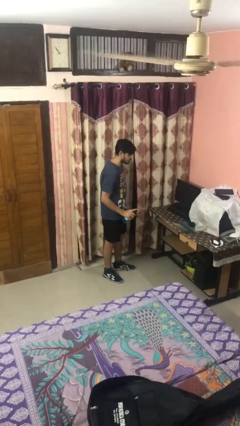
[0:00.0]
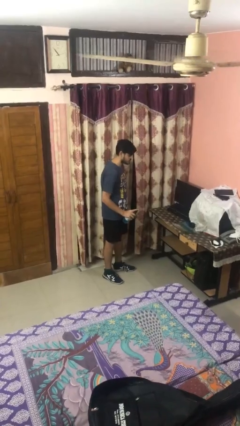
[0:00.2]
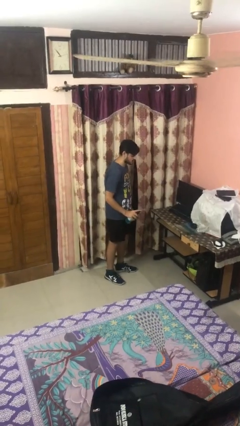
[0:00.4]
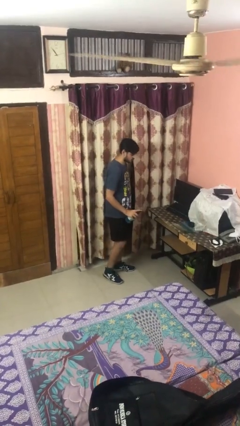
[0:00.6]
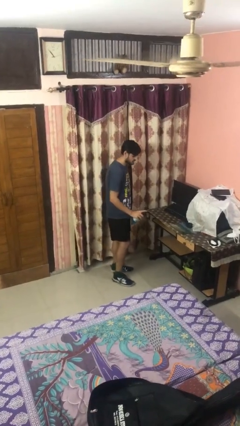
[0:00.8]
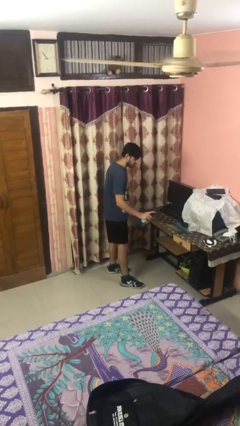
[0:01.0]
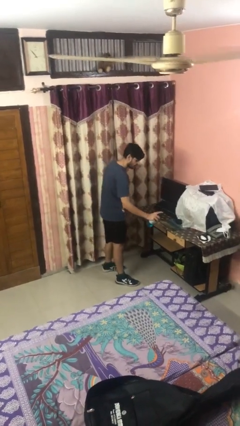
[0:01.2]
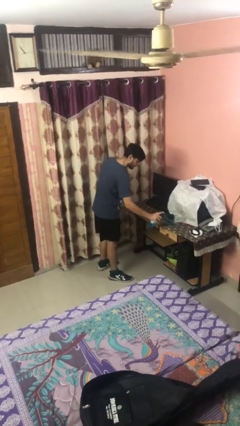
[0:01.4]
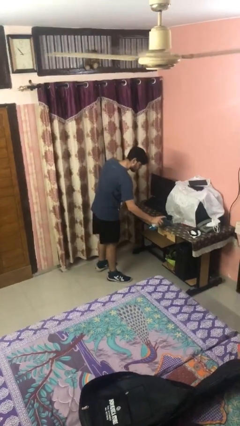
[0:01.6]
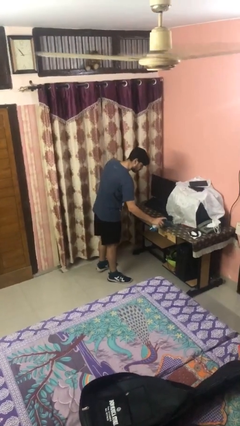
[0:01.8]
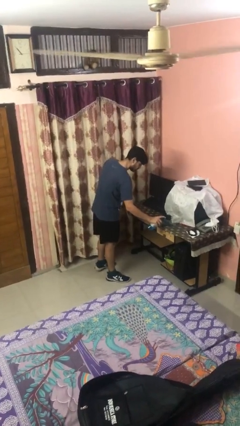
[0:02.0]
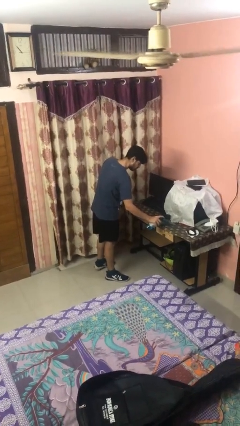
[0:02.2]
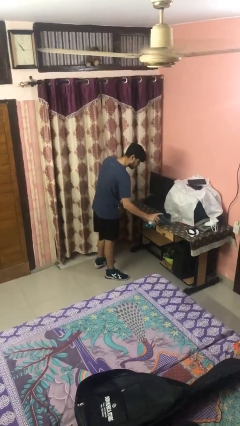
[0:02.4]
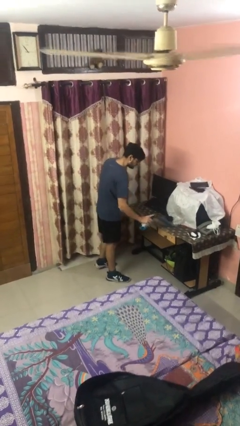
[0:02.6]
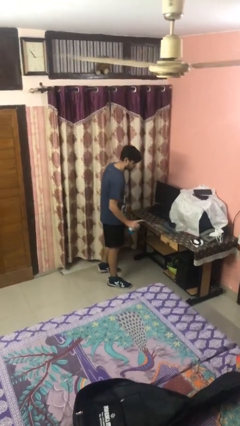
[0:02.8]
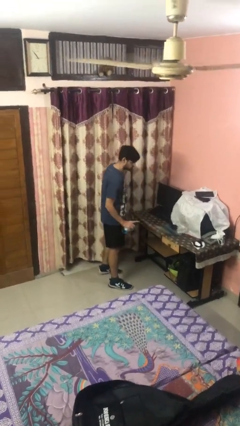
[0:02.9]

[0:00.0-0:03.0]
person sprays from bottle

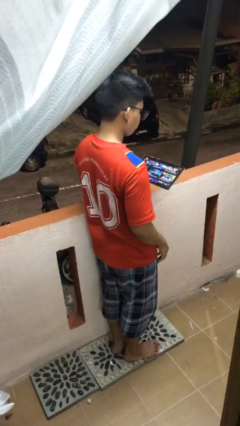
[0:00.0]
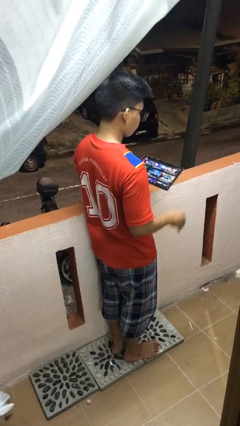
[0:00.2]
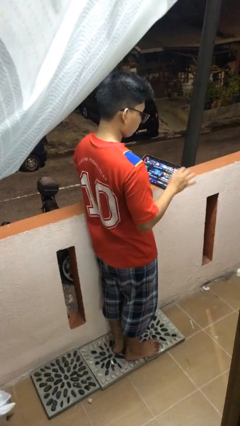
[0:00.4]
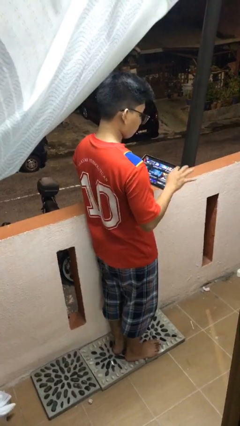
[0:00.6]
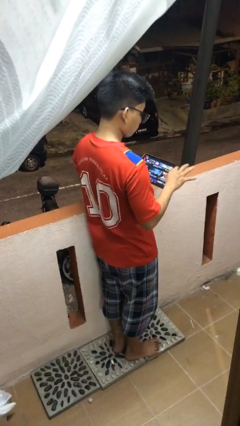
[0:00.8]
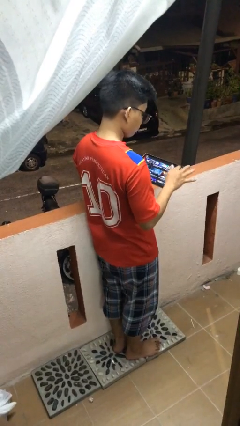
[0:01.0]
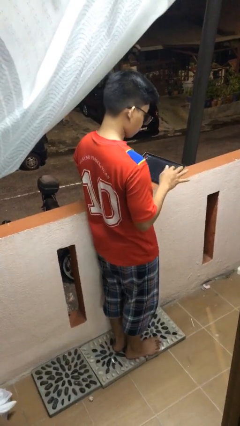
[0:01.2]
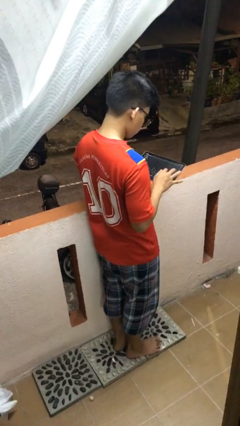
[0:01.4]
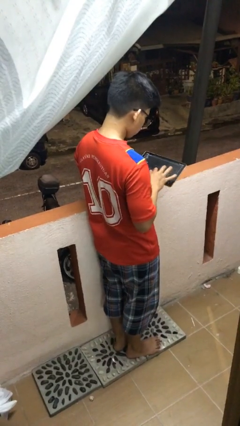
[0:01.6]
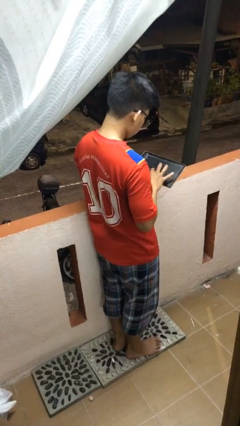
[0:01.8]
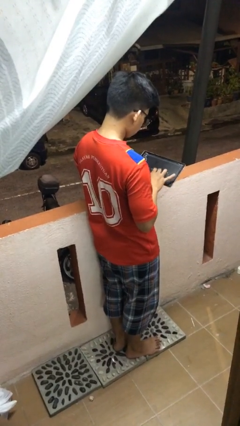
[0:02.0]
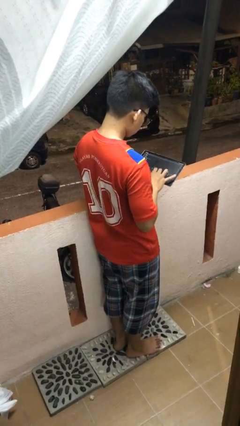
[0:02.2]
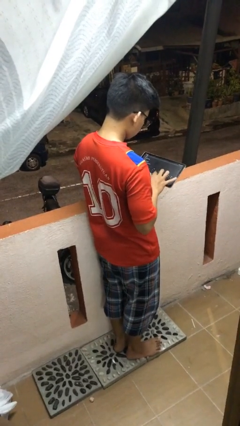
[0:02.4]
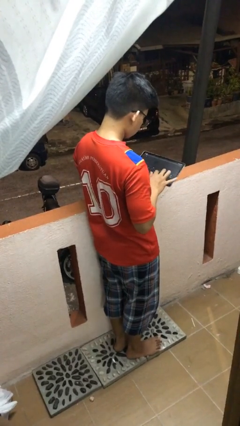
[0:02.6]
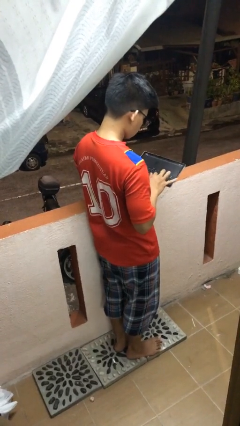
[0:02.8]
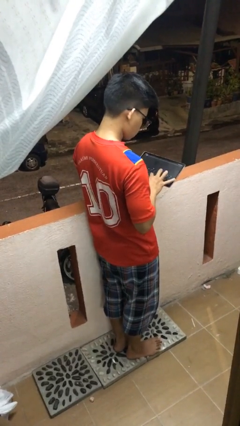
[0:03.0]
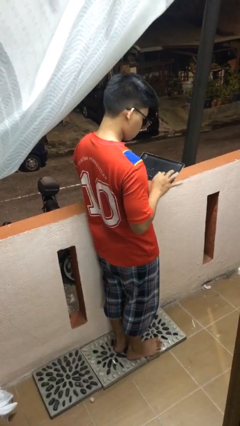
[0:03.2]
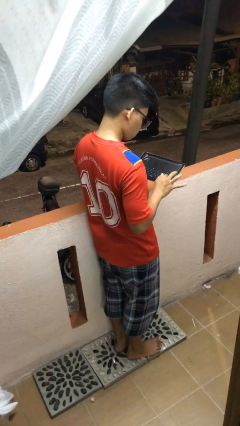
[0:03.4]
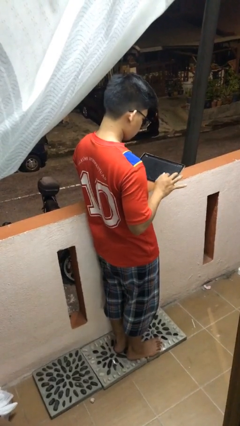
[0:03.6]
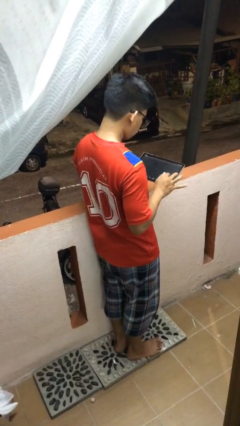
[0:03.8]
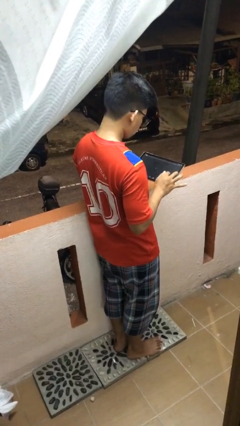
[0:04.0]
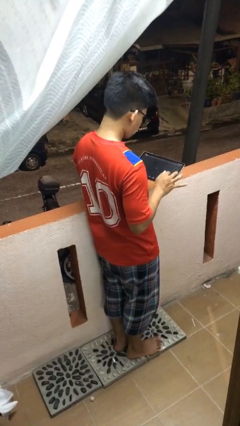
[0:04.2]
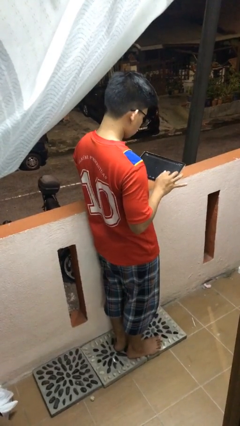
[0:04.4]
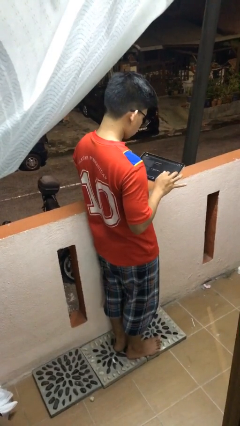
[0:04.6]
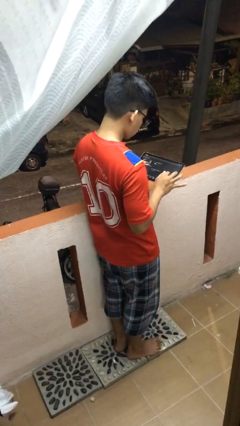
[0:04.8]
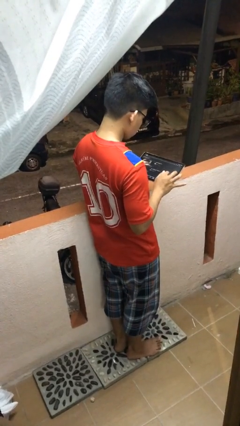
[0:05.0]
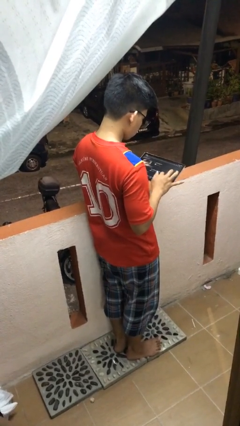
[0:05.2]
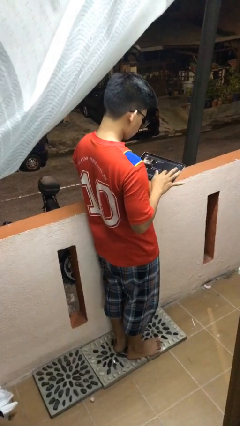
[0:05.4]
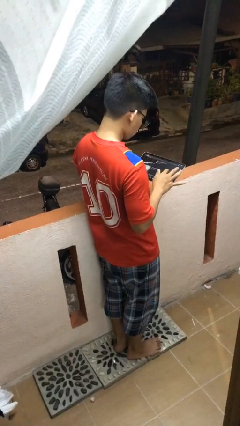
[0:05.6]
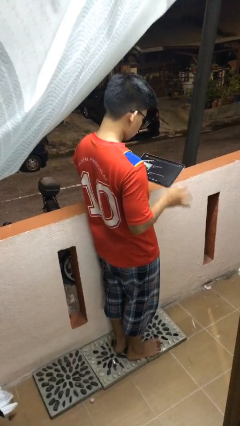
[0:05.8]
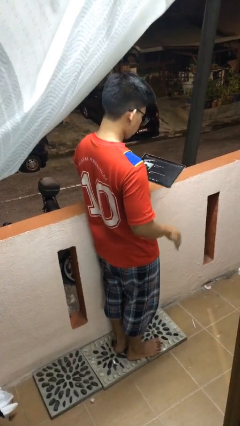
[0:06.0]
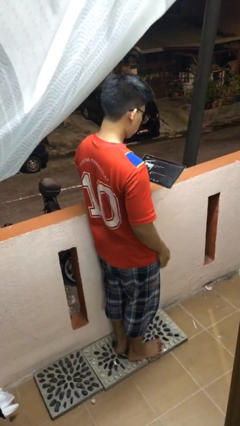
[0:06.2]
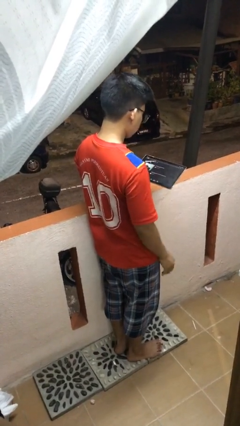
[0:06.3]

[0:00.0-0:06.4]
person interacts with tablet

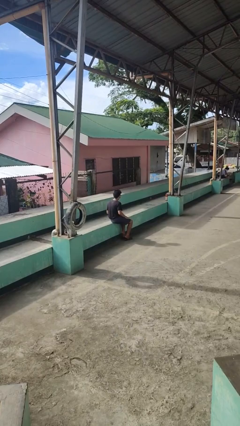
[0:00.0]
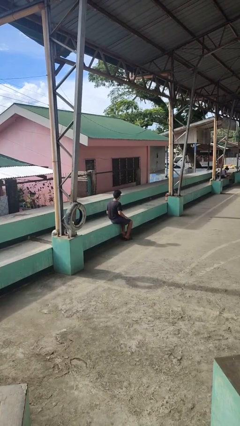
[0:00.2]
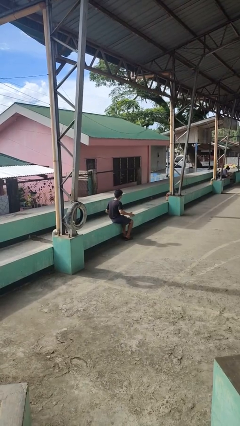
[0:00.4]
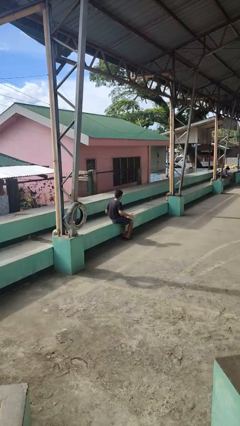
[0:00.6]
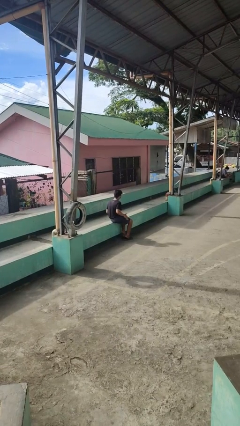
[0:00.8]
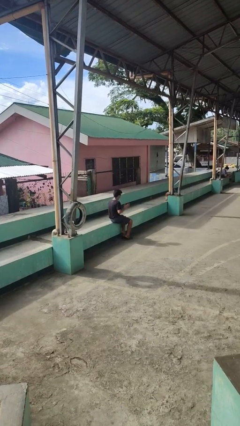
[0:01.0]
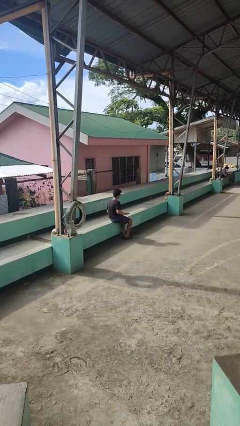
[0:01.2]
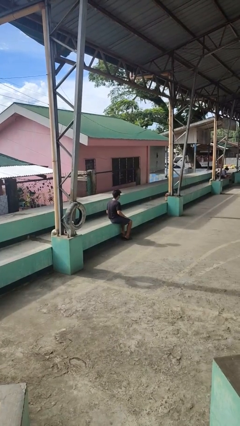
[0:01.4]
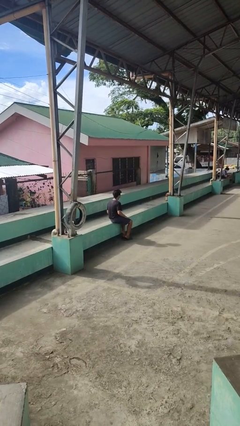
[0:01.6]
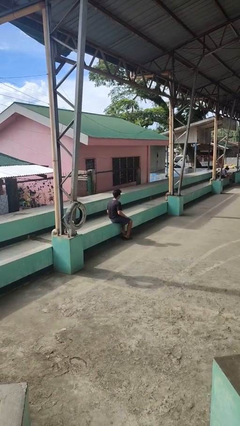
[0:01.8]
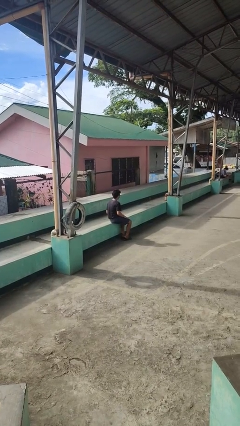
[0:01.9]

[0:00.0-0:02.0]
person slaps hands on thighs

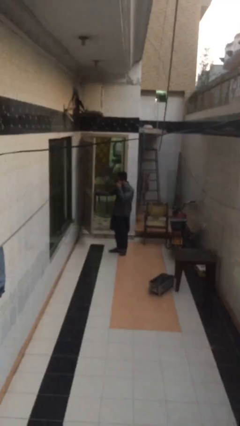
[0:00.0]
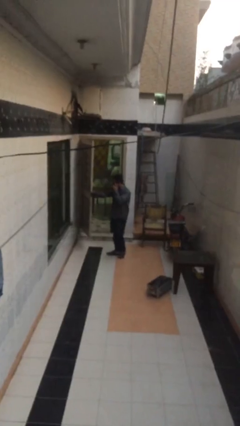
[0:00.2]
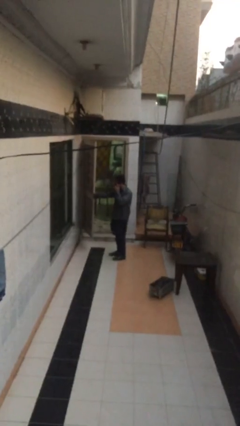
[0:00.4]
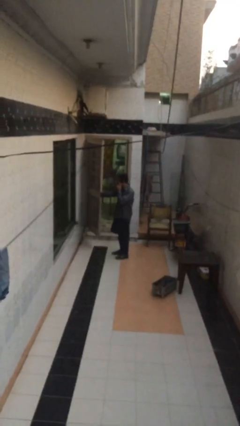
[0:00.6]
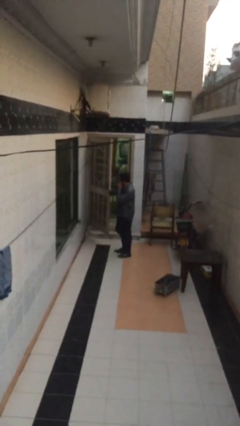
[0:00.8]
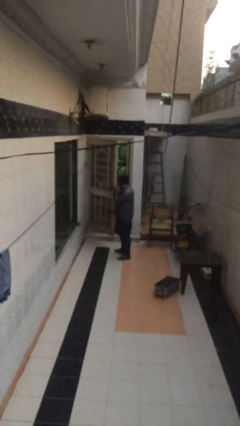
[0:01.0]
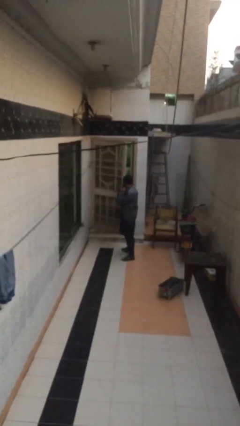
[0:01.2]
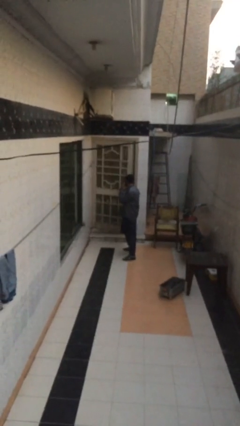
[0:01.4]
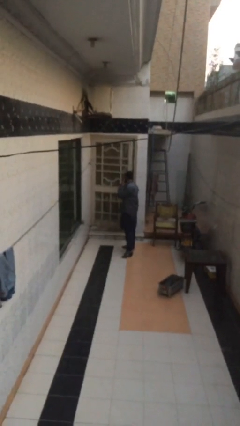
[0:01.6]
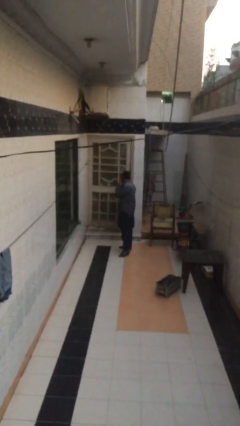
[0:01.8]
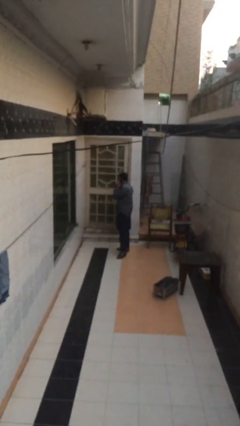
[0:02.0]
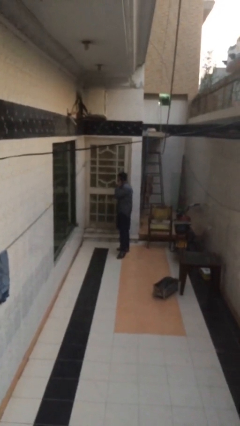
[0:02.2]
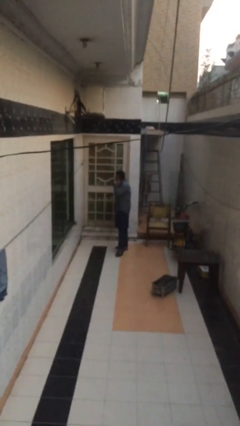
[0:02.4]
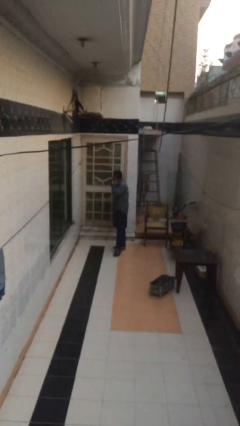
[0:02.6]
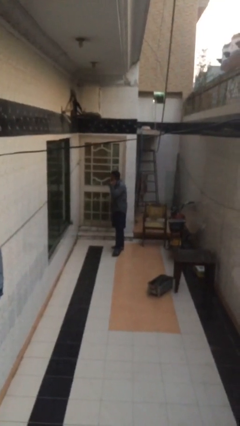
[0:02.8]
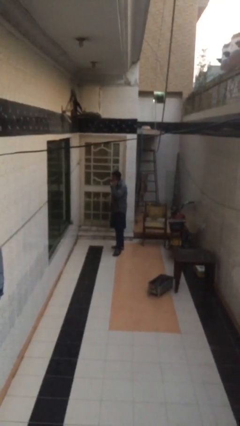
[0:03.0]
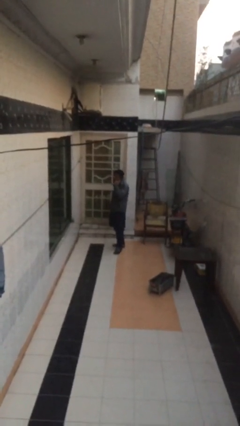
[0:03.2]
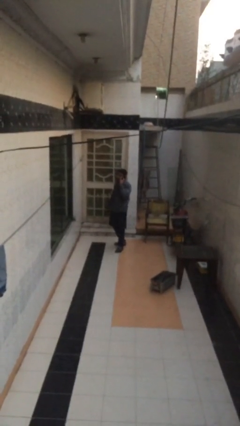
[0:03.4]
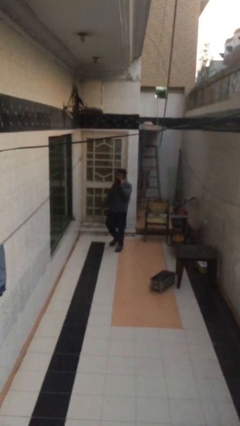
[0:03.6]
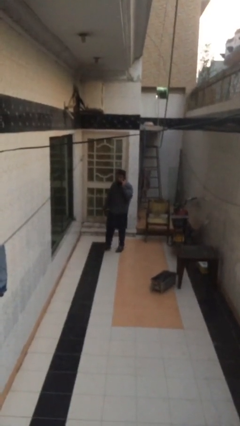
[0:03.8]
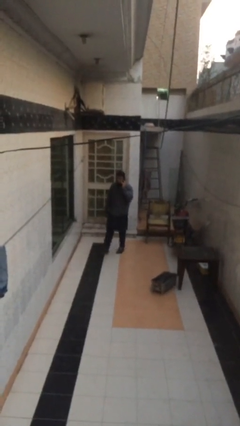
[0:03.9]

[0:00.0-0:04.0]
person closes facility door

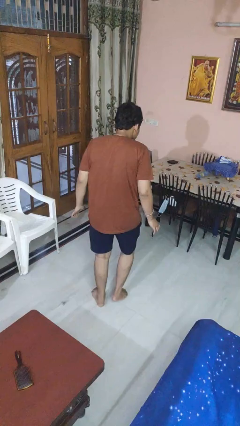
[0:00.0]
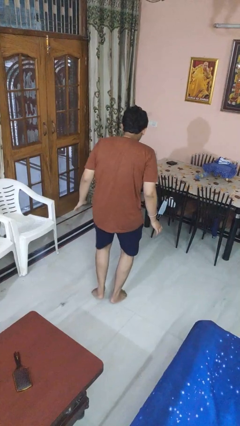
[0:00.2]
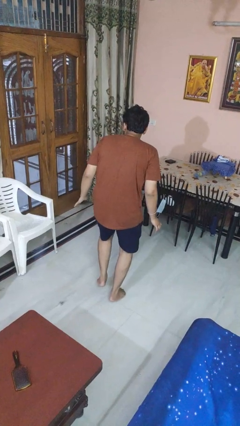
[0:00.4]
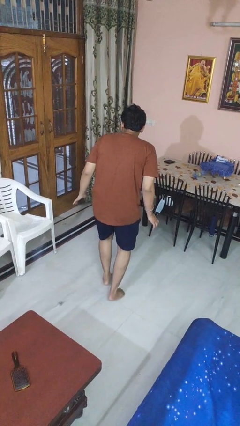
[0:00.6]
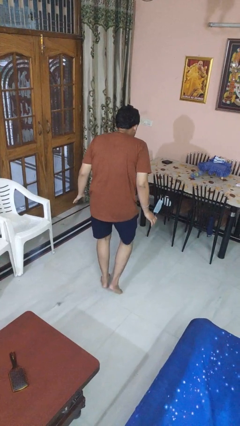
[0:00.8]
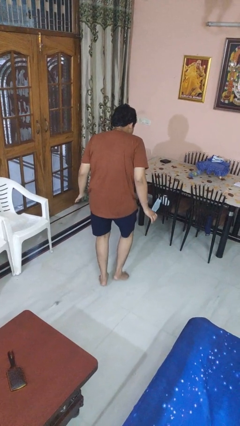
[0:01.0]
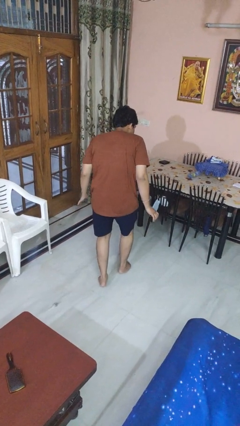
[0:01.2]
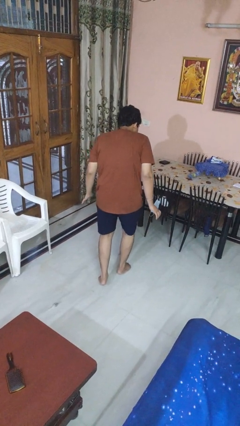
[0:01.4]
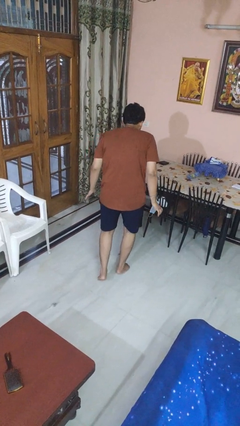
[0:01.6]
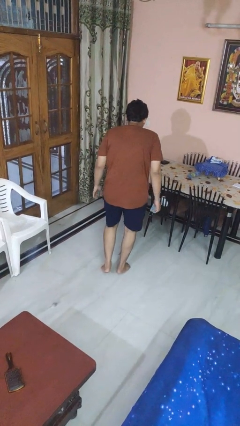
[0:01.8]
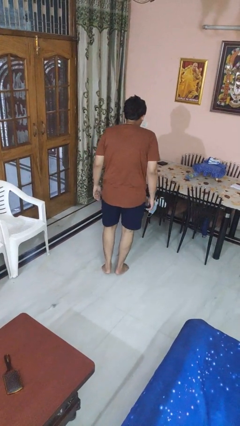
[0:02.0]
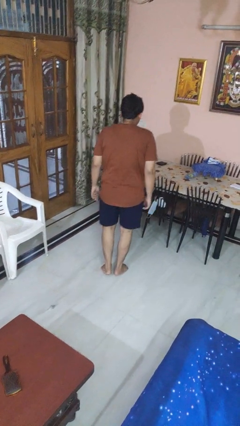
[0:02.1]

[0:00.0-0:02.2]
person walks tiptoe

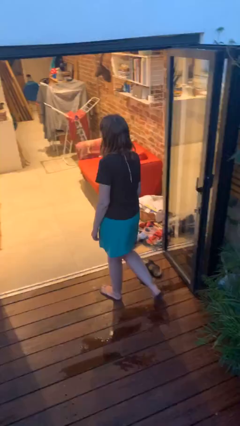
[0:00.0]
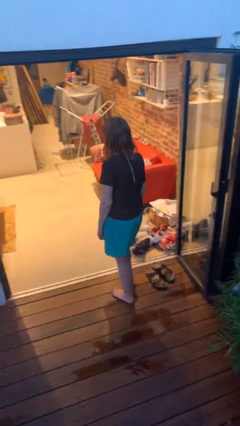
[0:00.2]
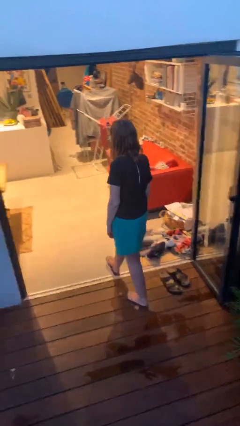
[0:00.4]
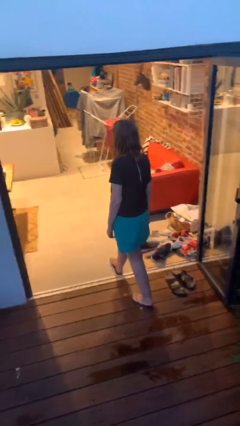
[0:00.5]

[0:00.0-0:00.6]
person exits scene through structure
